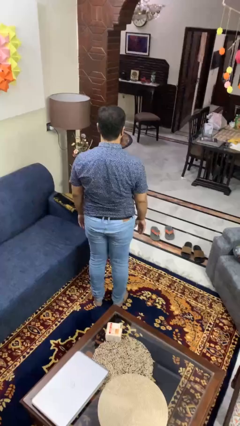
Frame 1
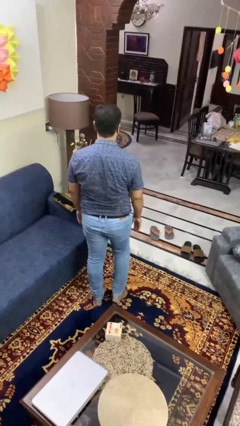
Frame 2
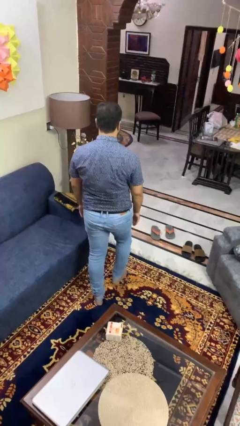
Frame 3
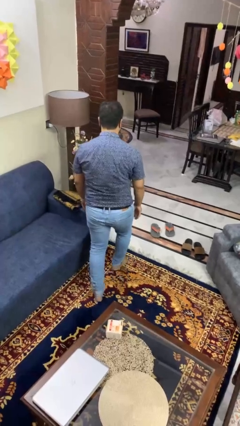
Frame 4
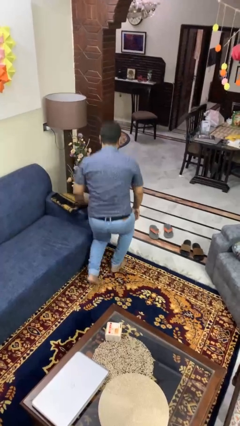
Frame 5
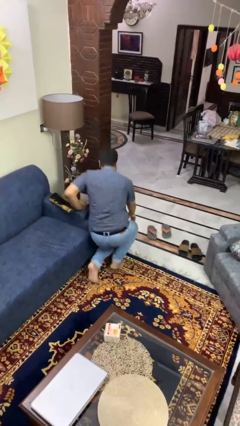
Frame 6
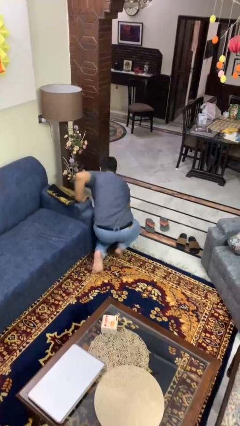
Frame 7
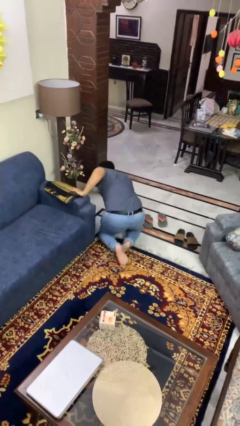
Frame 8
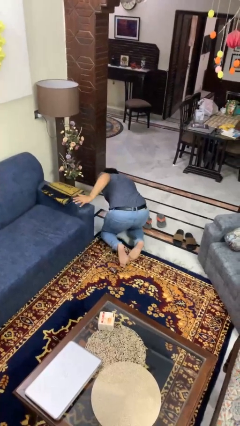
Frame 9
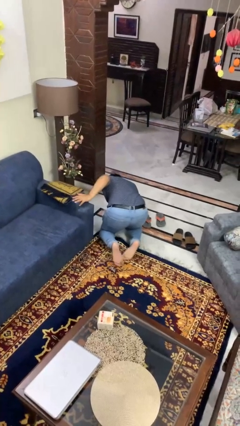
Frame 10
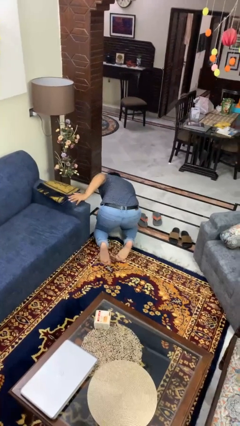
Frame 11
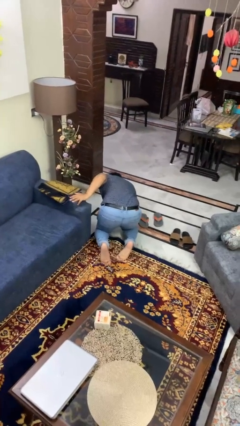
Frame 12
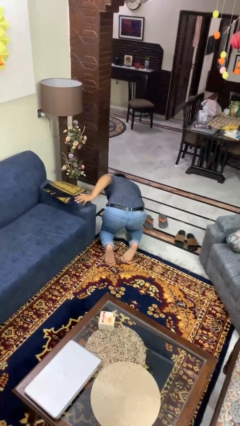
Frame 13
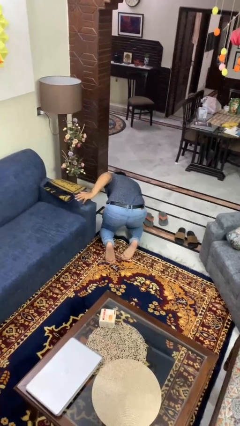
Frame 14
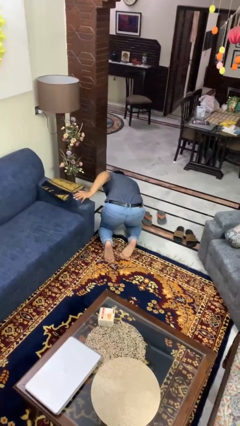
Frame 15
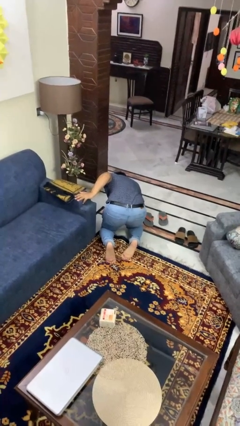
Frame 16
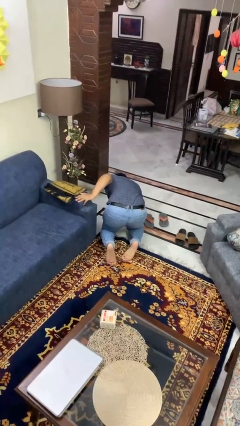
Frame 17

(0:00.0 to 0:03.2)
person trips on object on floor

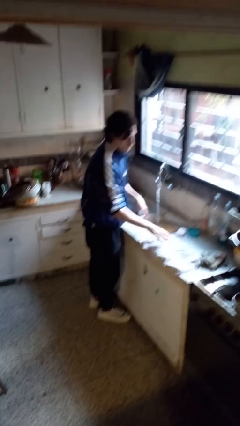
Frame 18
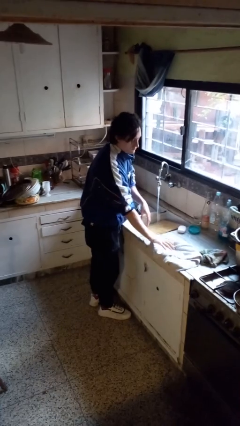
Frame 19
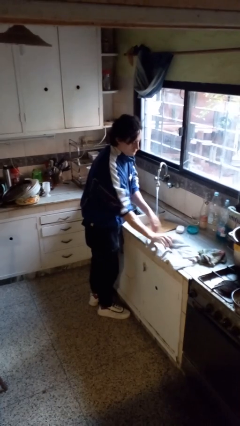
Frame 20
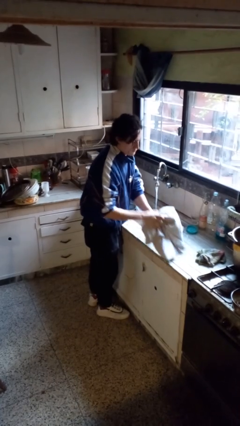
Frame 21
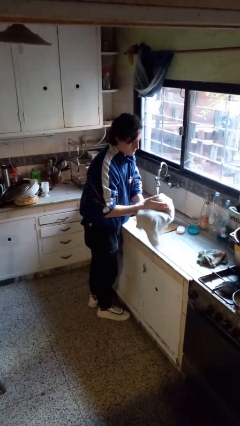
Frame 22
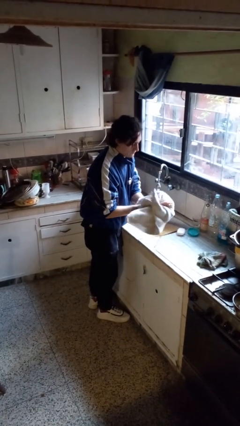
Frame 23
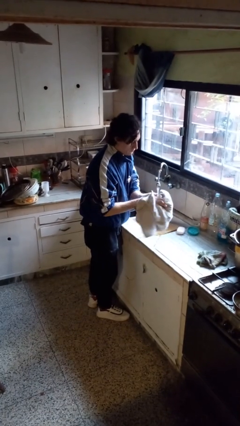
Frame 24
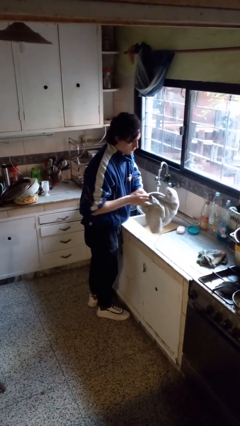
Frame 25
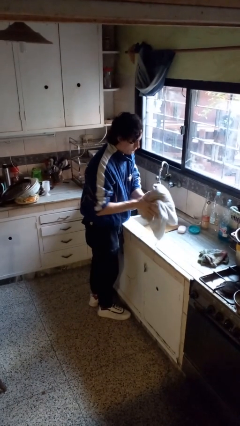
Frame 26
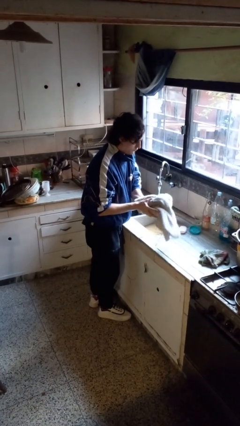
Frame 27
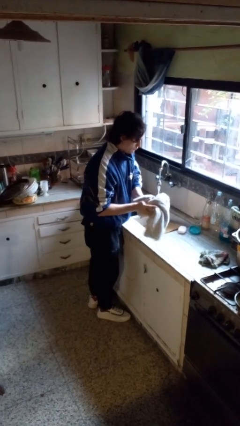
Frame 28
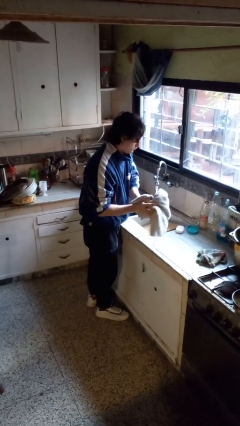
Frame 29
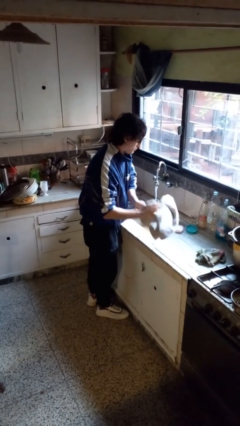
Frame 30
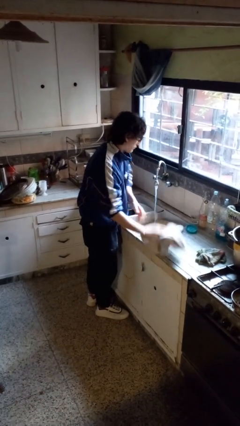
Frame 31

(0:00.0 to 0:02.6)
person dries hands with towel

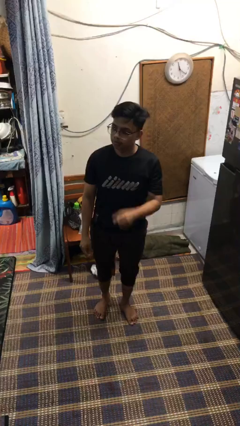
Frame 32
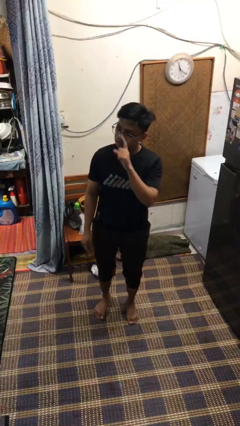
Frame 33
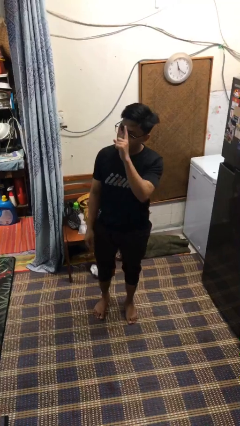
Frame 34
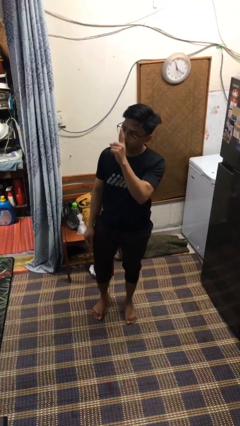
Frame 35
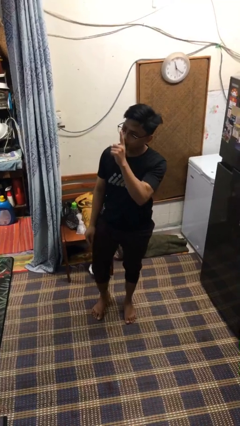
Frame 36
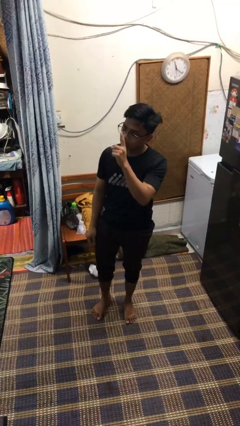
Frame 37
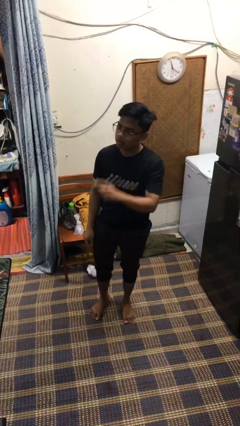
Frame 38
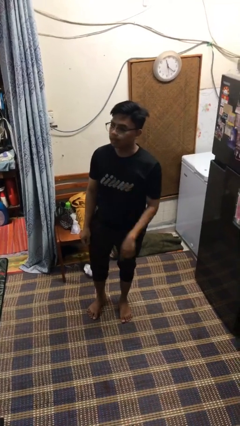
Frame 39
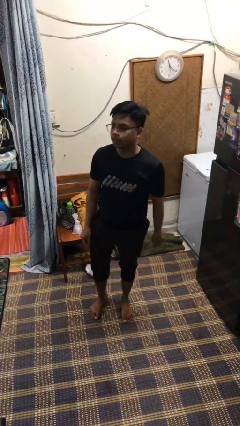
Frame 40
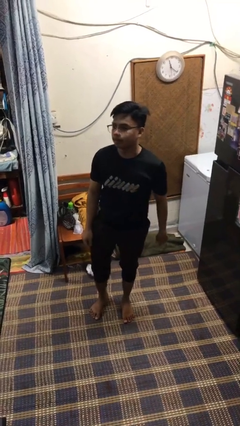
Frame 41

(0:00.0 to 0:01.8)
person gestures number one

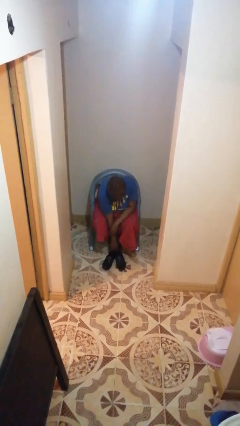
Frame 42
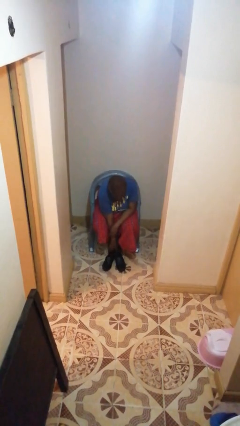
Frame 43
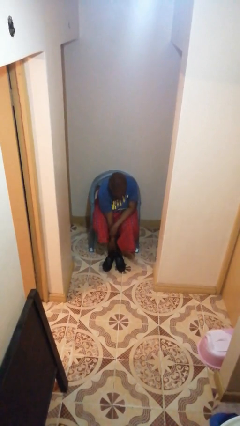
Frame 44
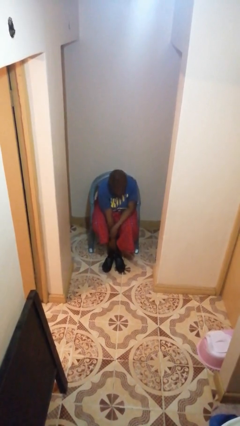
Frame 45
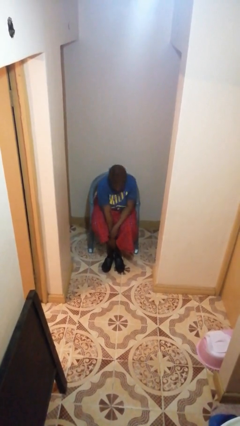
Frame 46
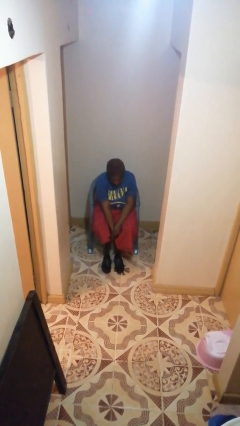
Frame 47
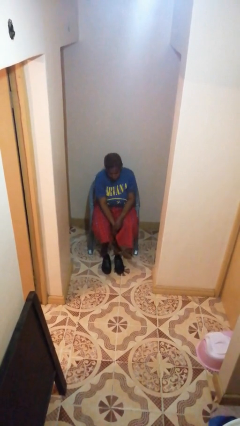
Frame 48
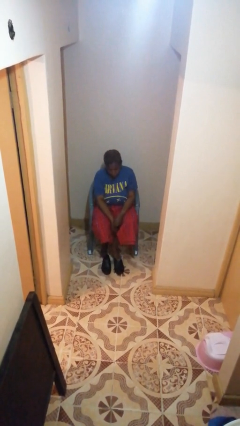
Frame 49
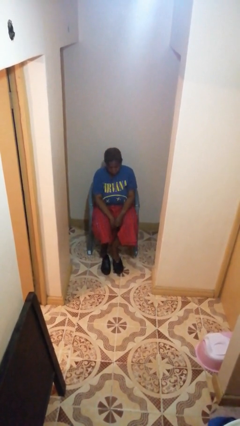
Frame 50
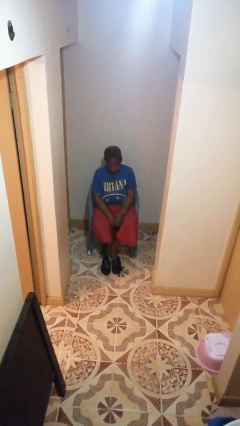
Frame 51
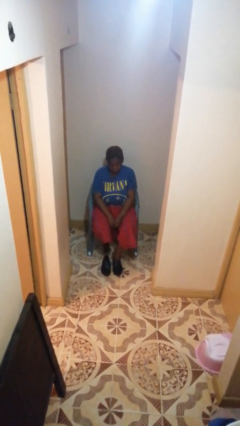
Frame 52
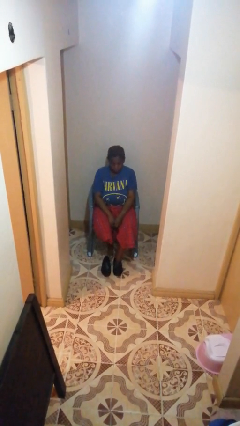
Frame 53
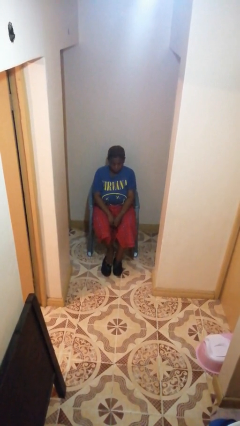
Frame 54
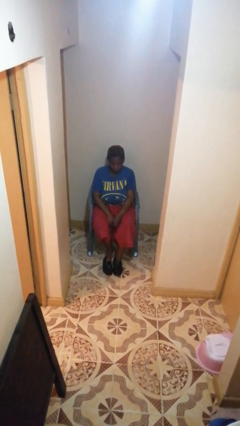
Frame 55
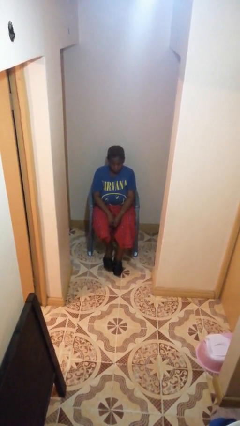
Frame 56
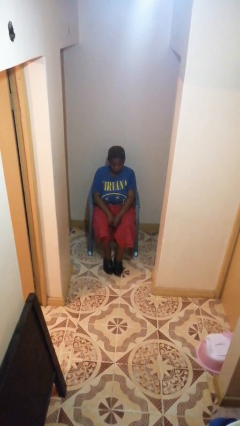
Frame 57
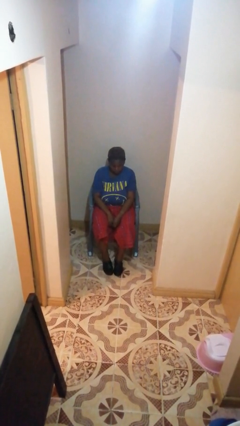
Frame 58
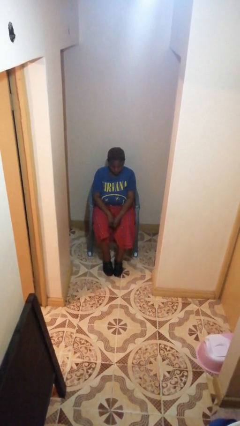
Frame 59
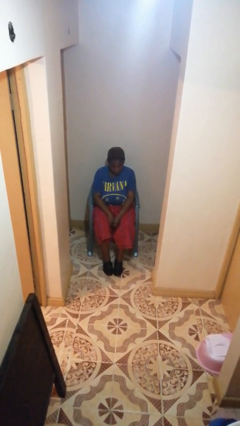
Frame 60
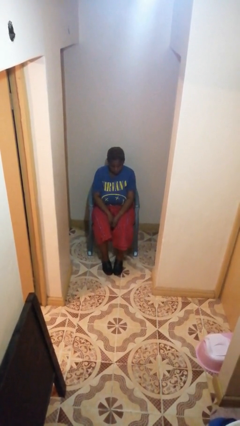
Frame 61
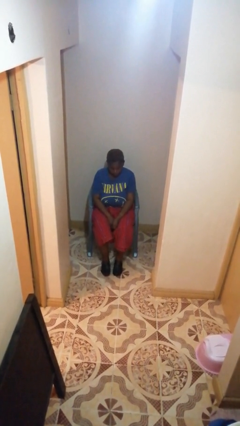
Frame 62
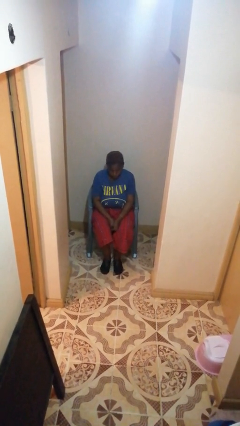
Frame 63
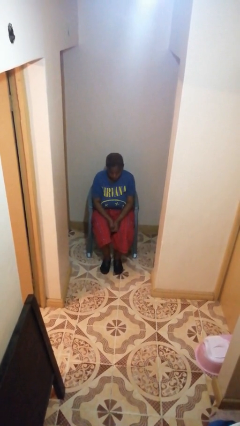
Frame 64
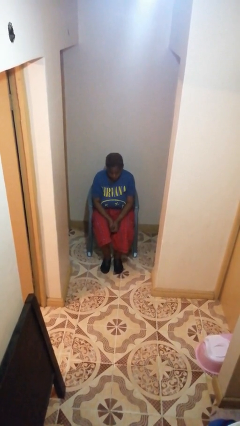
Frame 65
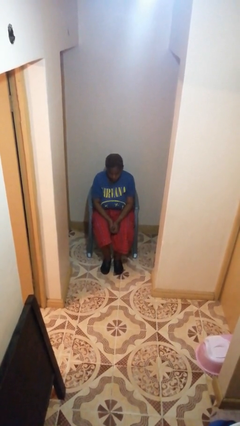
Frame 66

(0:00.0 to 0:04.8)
person puts on shoes

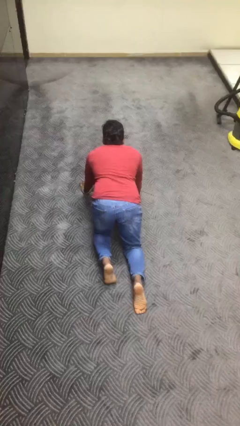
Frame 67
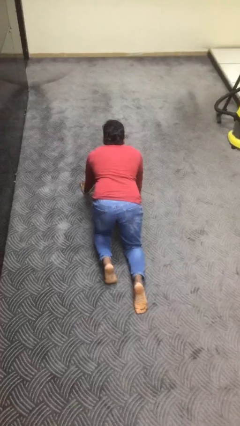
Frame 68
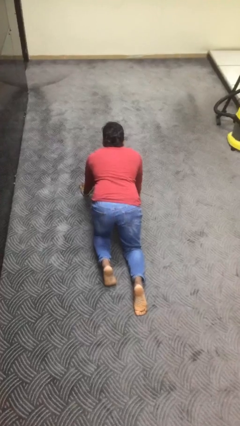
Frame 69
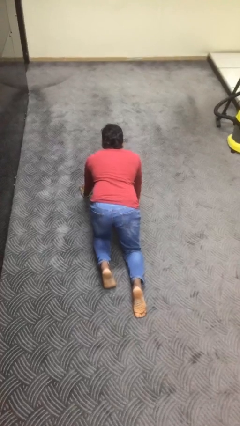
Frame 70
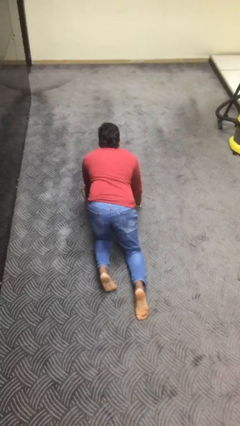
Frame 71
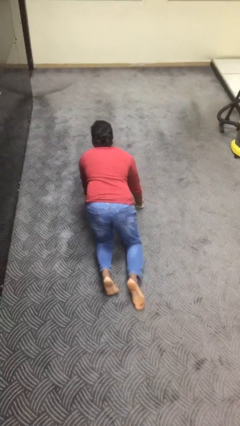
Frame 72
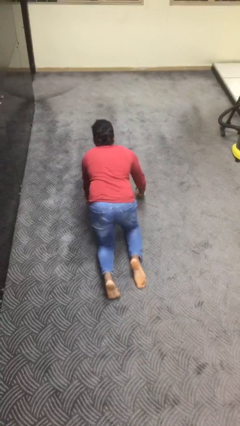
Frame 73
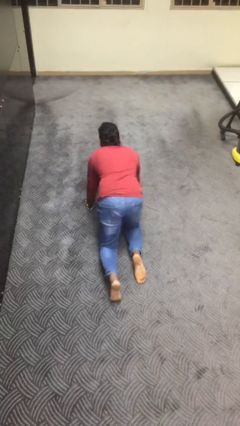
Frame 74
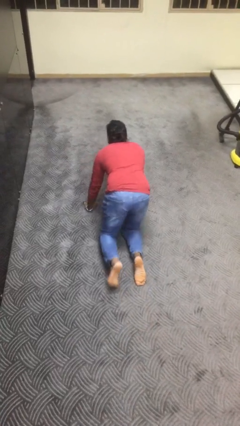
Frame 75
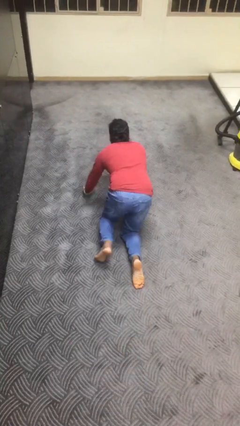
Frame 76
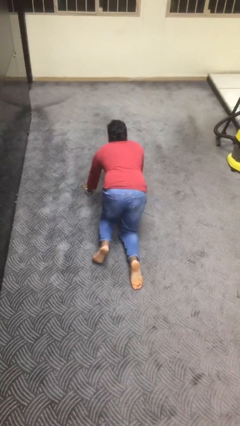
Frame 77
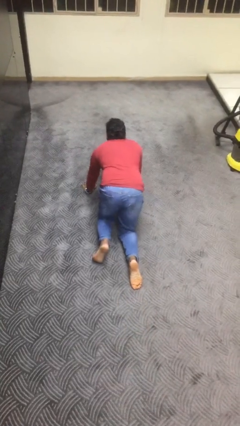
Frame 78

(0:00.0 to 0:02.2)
person crawls

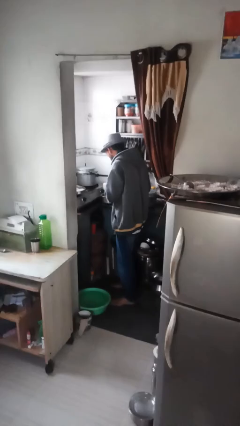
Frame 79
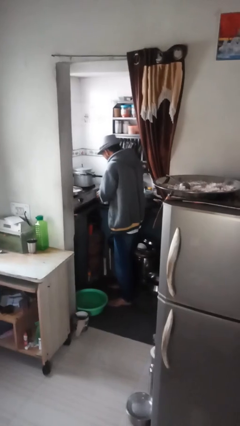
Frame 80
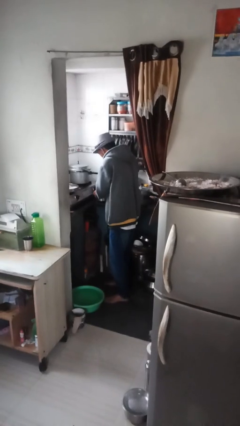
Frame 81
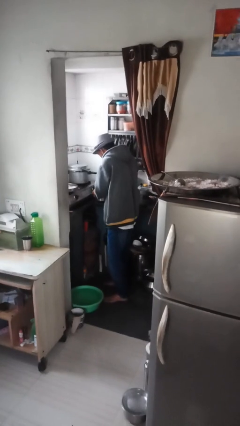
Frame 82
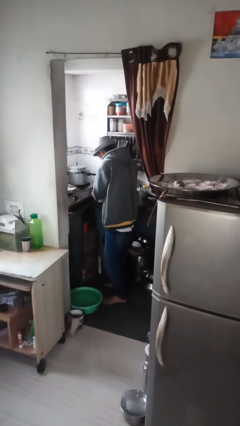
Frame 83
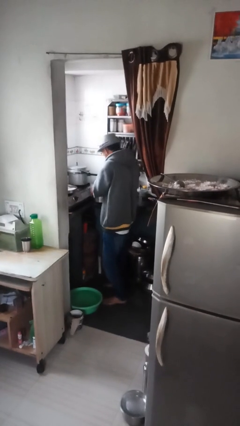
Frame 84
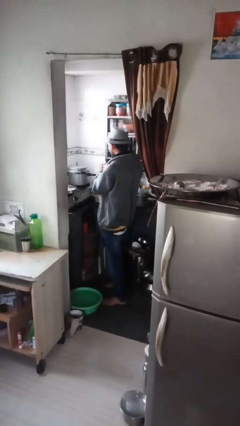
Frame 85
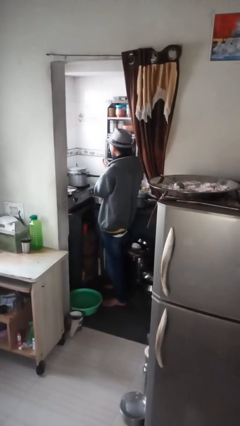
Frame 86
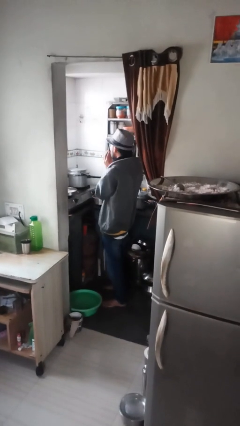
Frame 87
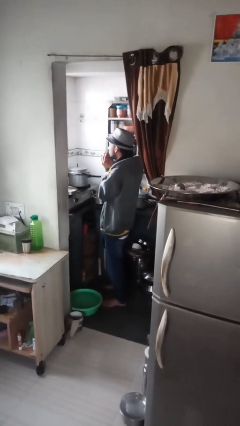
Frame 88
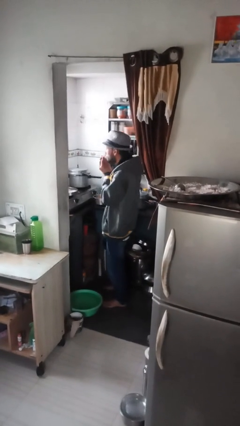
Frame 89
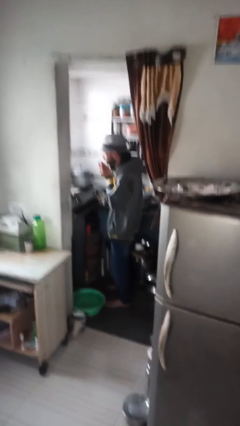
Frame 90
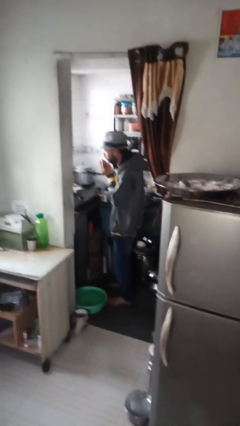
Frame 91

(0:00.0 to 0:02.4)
person burns hand
